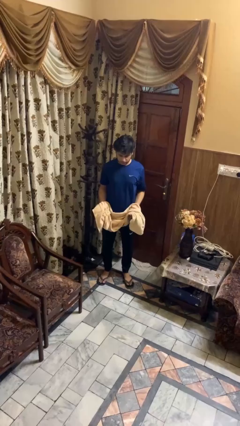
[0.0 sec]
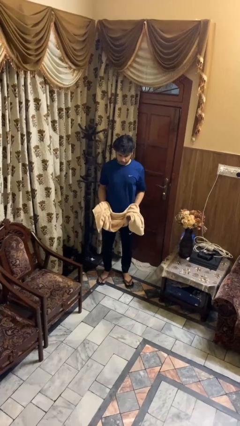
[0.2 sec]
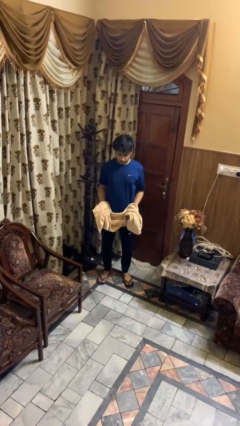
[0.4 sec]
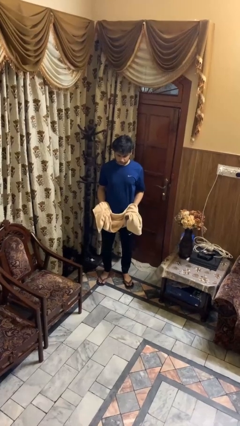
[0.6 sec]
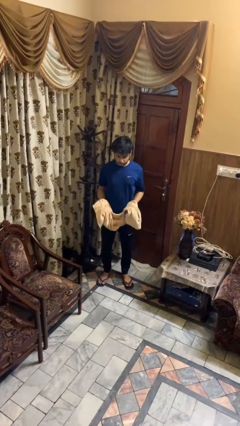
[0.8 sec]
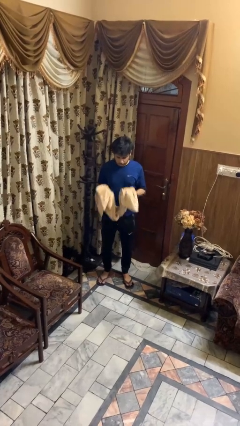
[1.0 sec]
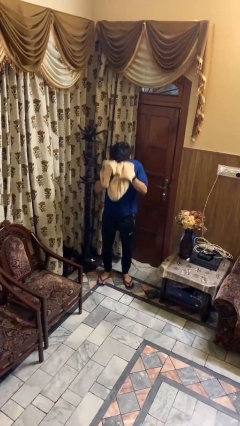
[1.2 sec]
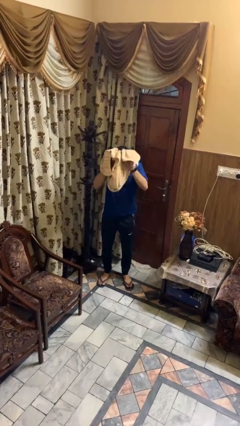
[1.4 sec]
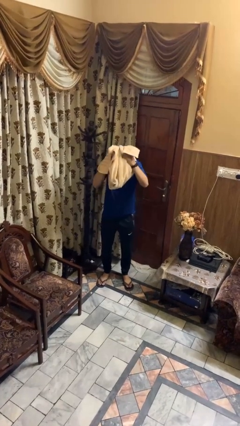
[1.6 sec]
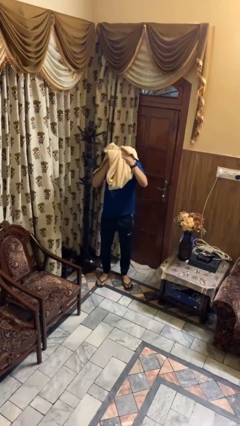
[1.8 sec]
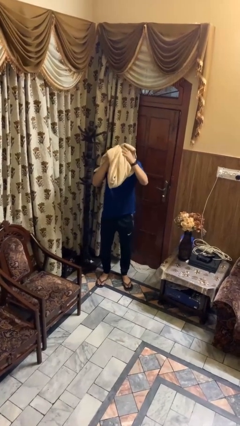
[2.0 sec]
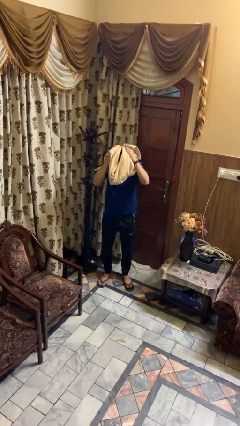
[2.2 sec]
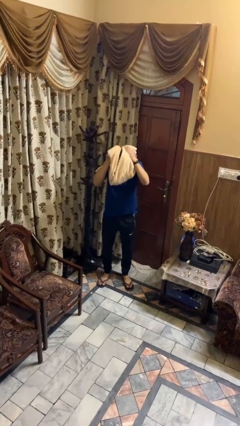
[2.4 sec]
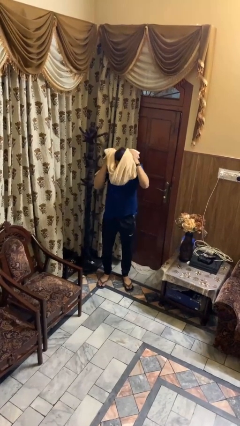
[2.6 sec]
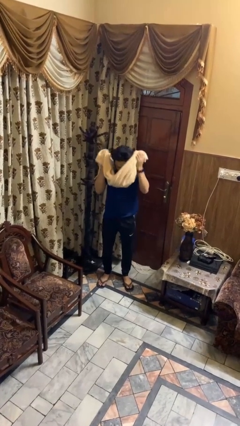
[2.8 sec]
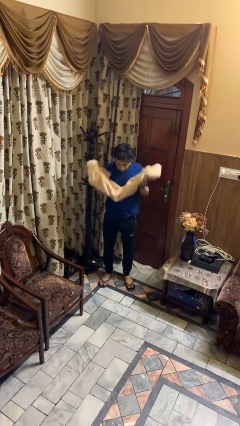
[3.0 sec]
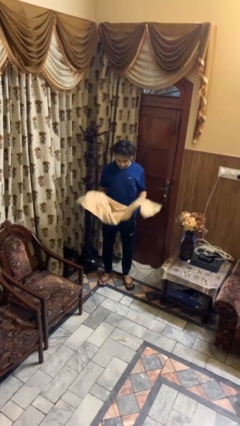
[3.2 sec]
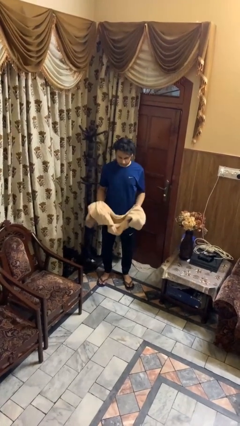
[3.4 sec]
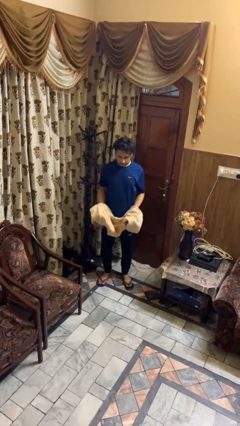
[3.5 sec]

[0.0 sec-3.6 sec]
person dries hair with towel

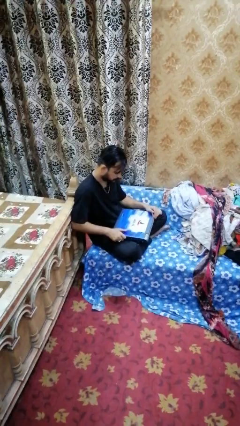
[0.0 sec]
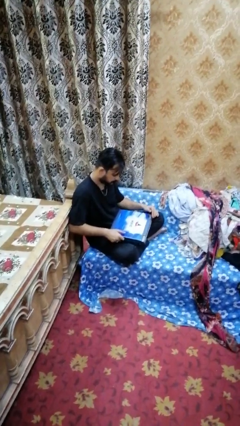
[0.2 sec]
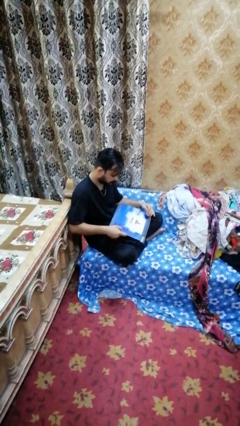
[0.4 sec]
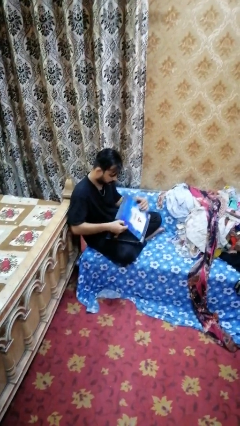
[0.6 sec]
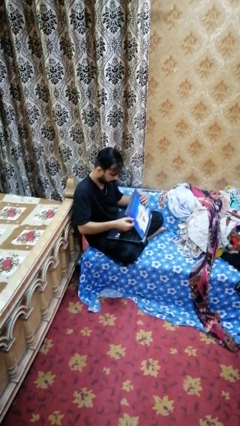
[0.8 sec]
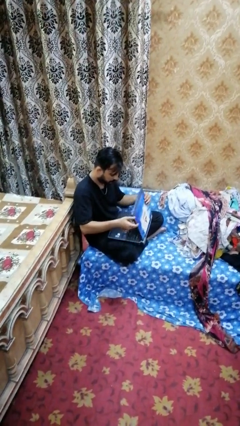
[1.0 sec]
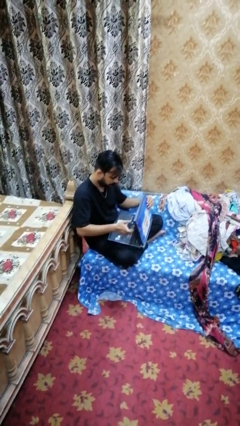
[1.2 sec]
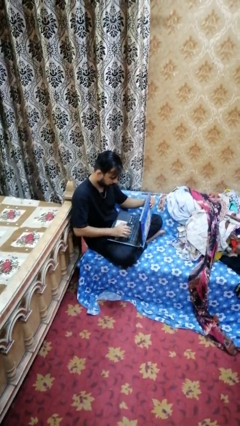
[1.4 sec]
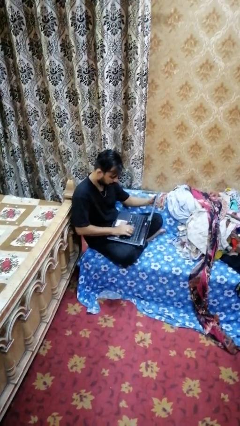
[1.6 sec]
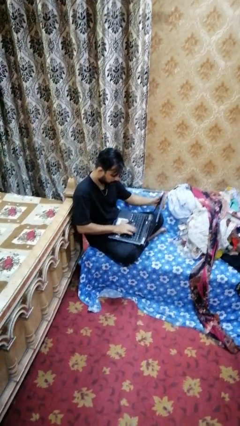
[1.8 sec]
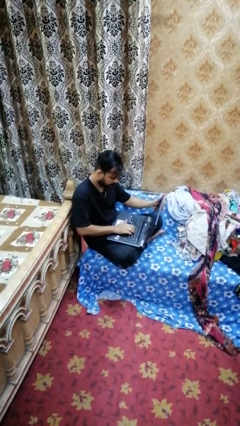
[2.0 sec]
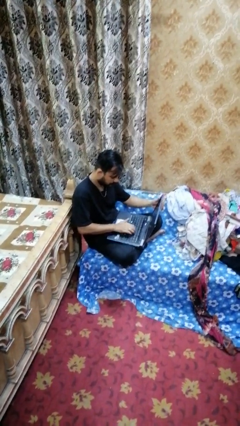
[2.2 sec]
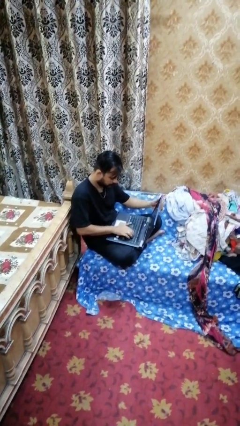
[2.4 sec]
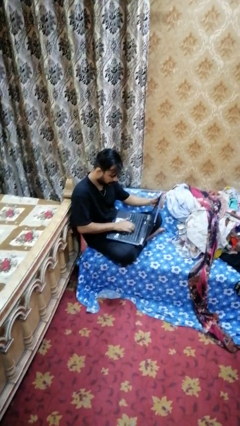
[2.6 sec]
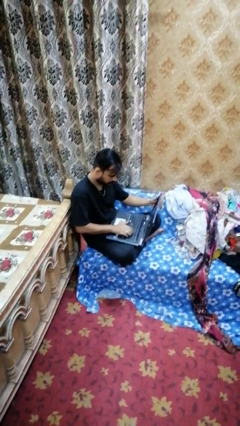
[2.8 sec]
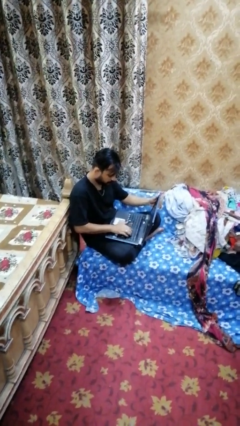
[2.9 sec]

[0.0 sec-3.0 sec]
person opens laptop

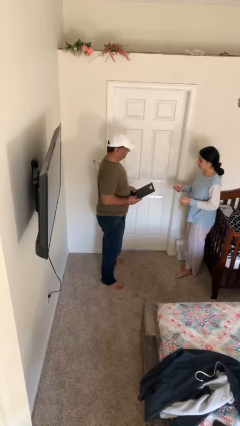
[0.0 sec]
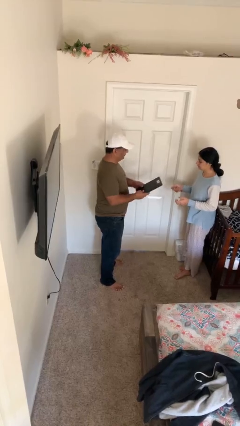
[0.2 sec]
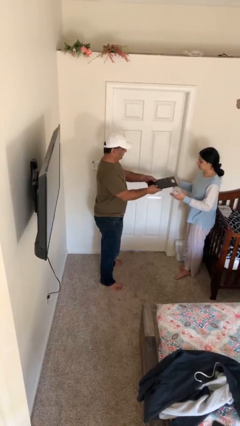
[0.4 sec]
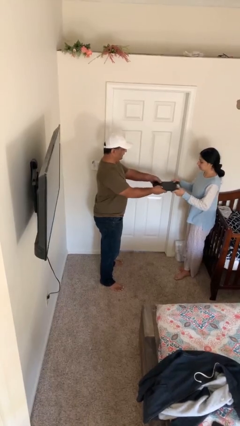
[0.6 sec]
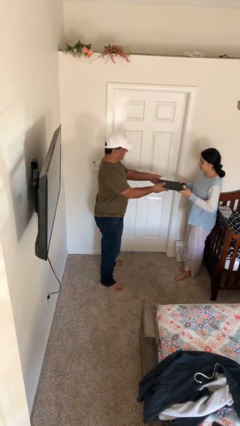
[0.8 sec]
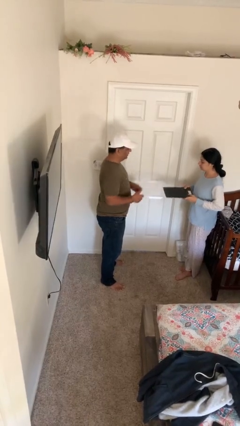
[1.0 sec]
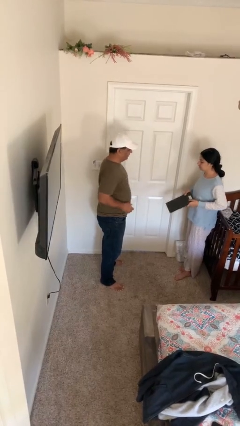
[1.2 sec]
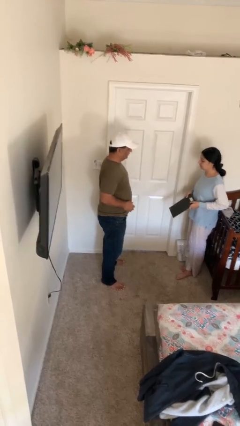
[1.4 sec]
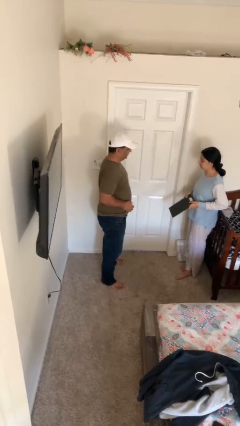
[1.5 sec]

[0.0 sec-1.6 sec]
person transfers object to person

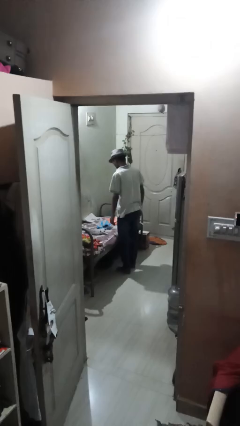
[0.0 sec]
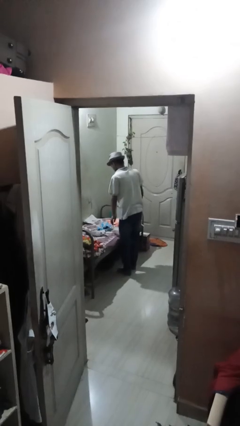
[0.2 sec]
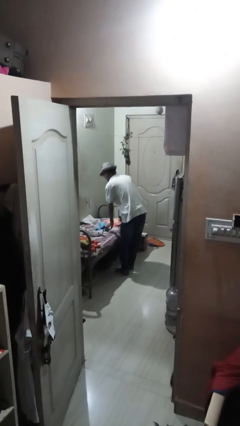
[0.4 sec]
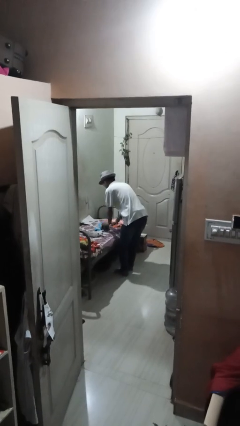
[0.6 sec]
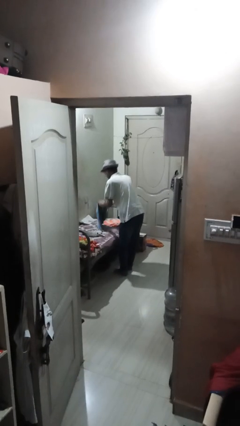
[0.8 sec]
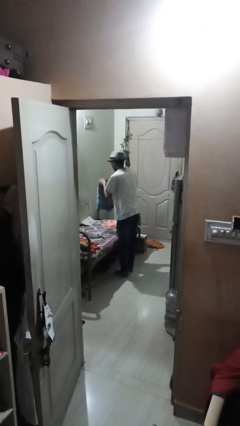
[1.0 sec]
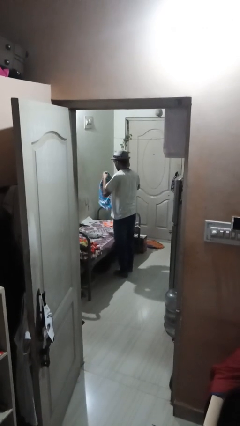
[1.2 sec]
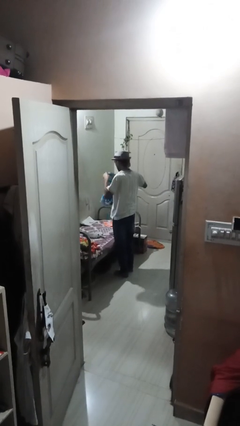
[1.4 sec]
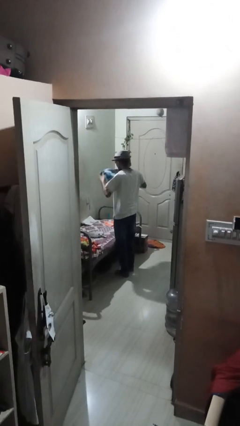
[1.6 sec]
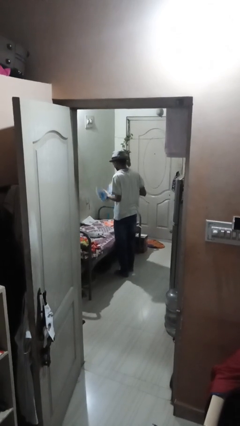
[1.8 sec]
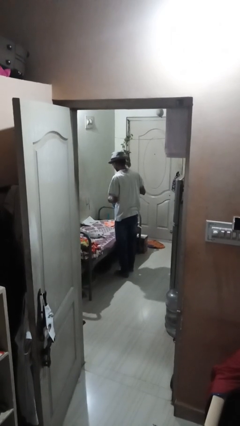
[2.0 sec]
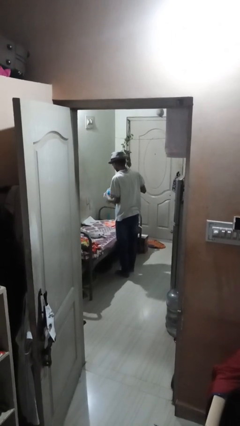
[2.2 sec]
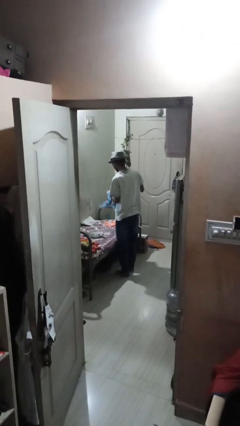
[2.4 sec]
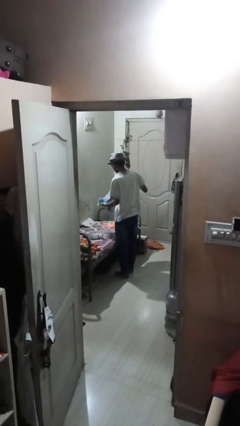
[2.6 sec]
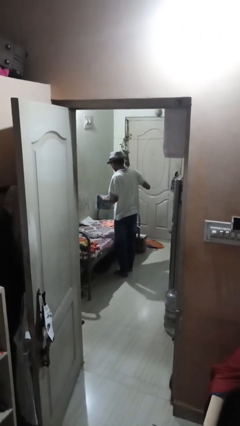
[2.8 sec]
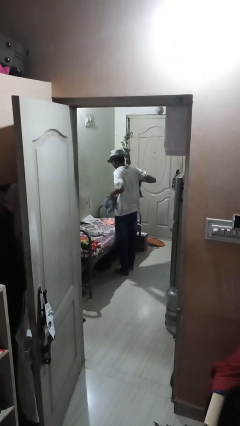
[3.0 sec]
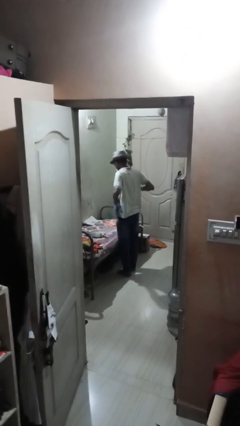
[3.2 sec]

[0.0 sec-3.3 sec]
person folds towel

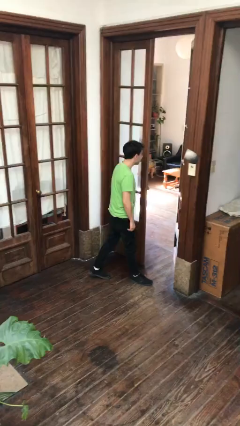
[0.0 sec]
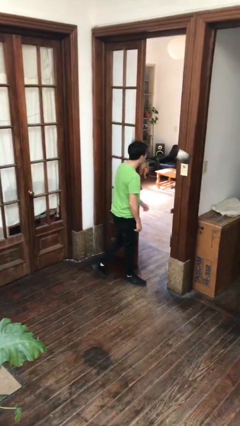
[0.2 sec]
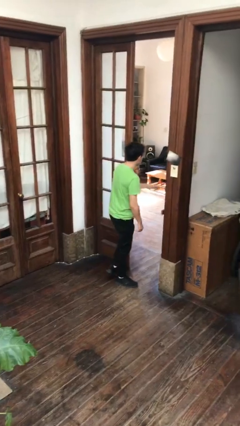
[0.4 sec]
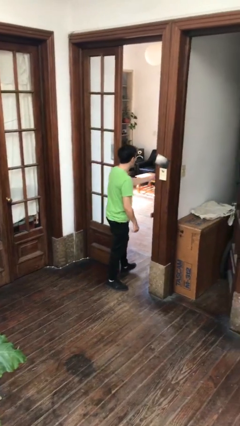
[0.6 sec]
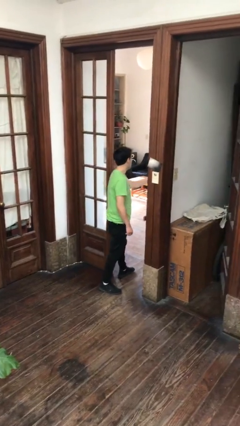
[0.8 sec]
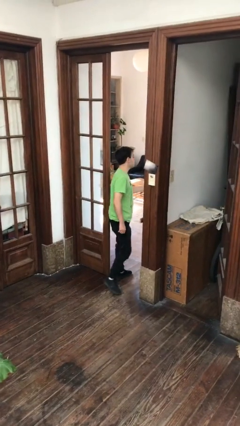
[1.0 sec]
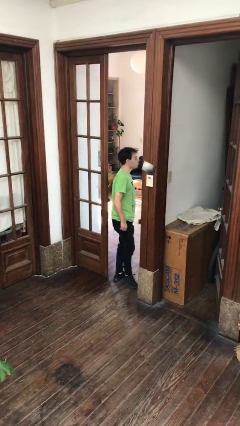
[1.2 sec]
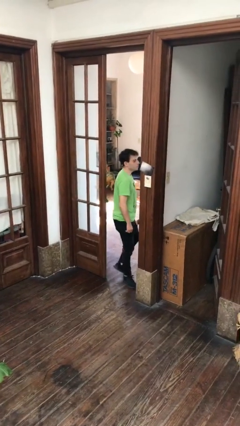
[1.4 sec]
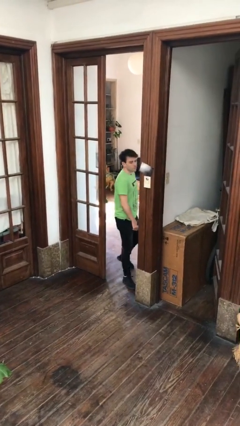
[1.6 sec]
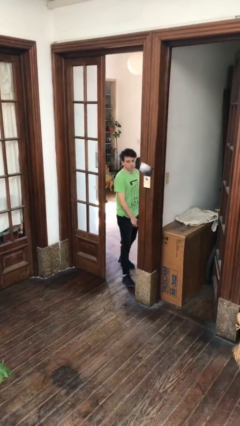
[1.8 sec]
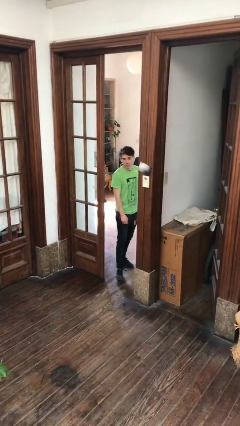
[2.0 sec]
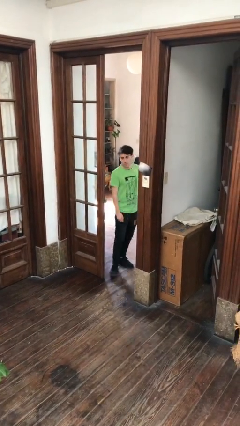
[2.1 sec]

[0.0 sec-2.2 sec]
person exits scene through structure

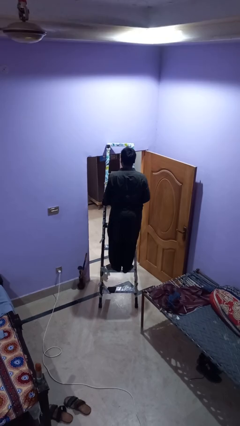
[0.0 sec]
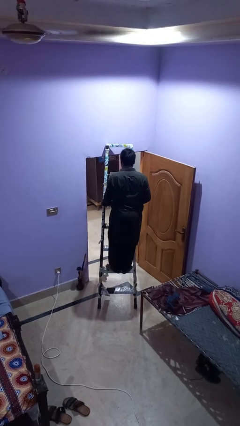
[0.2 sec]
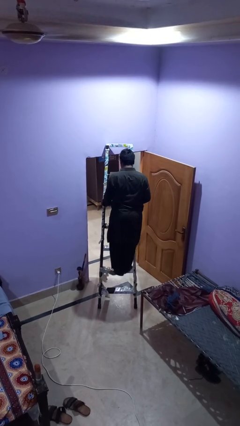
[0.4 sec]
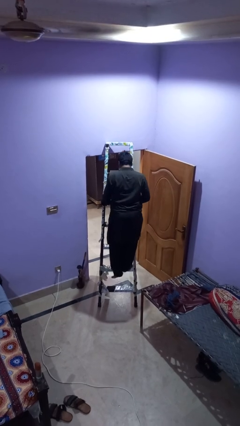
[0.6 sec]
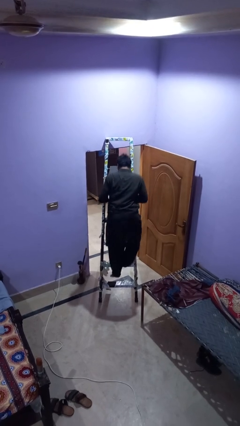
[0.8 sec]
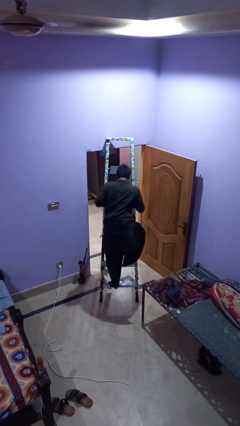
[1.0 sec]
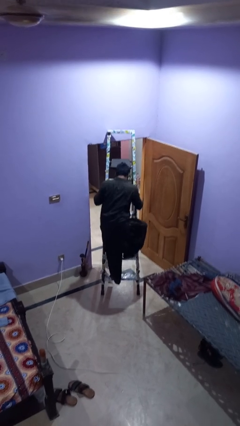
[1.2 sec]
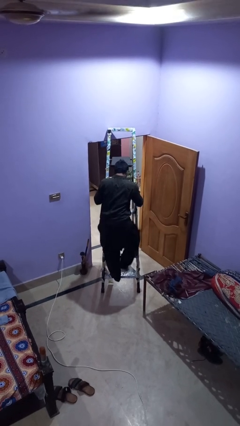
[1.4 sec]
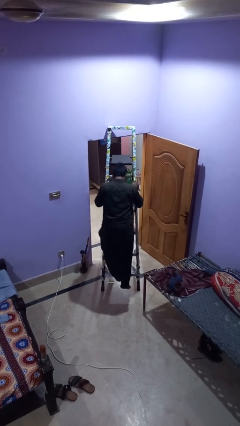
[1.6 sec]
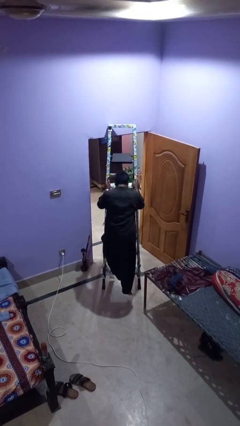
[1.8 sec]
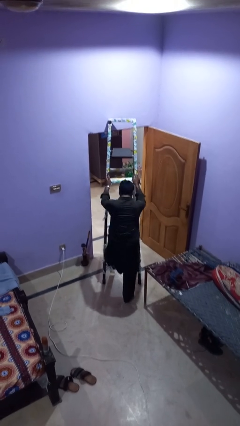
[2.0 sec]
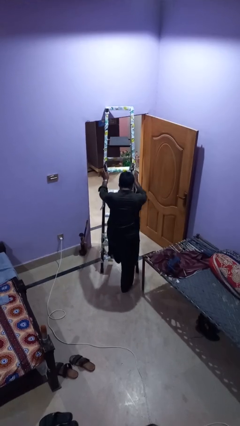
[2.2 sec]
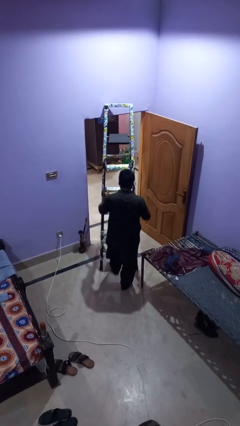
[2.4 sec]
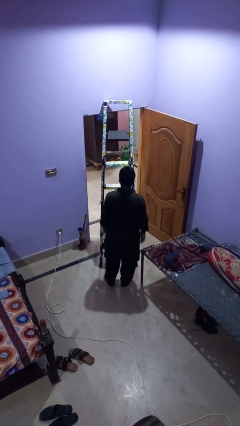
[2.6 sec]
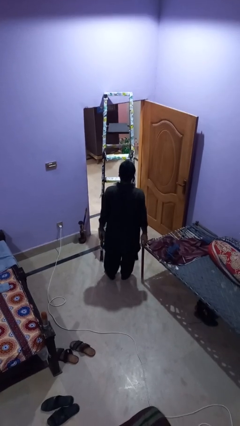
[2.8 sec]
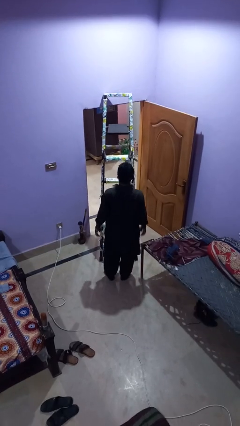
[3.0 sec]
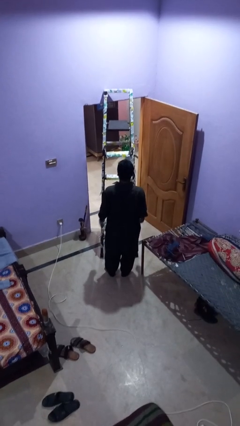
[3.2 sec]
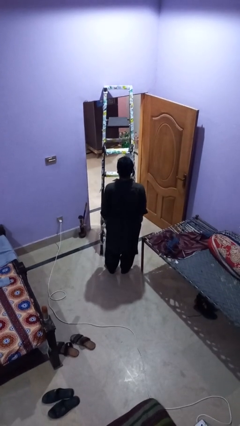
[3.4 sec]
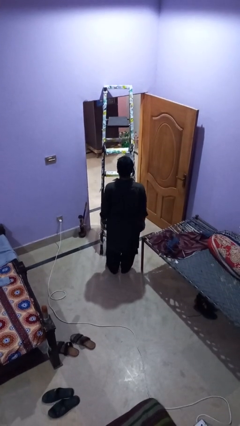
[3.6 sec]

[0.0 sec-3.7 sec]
person climbs down ladder

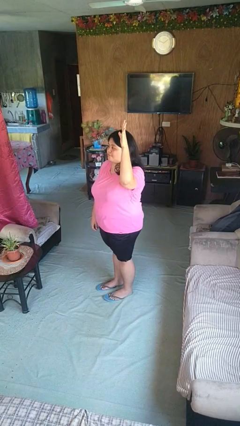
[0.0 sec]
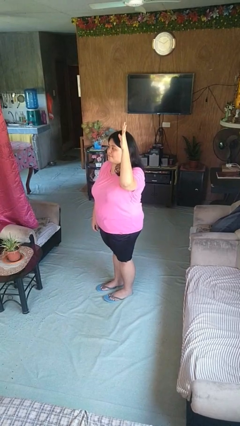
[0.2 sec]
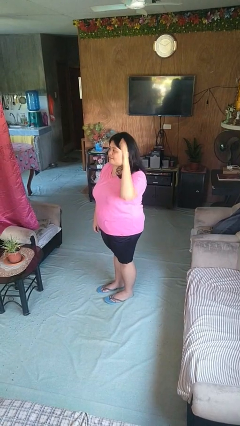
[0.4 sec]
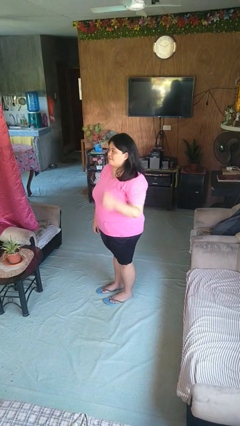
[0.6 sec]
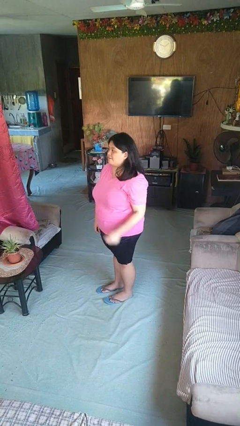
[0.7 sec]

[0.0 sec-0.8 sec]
person gestures lower hand
